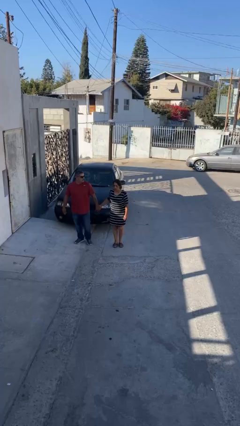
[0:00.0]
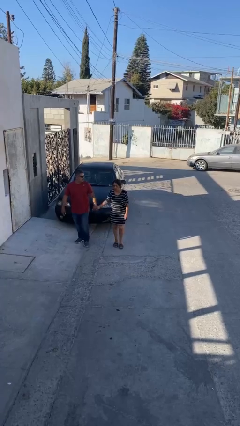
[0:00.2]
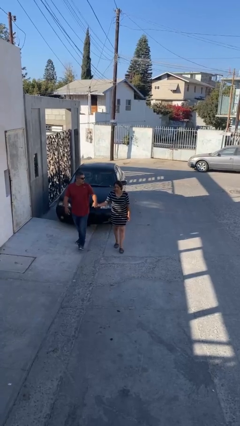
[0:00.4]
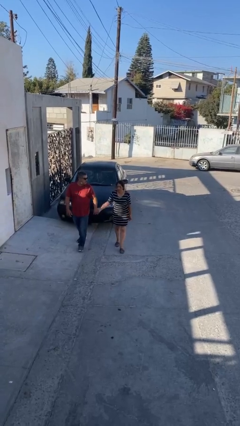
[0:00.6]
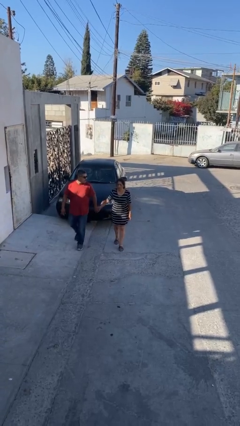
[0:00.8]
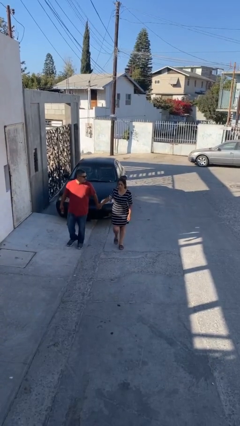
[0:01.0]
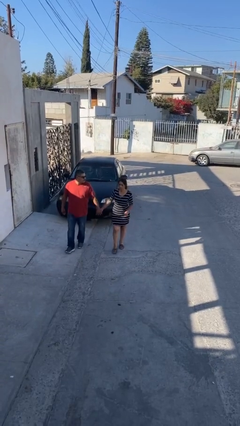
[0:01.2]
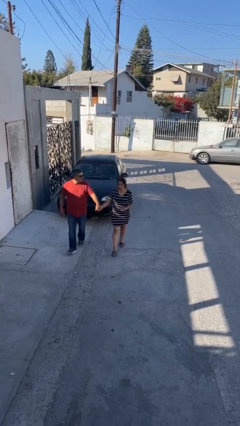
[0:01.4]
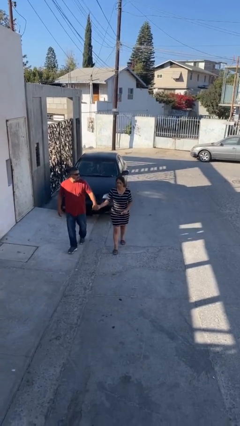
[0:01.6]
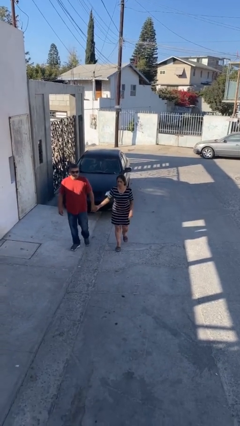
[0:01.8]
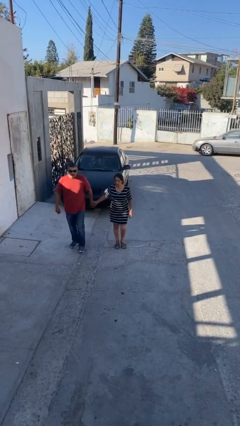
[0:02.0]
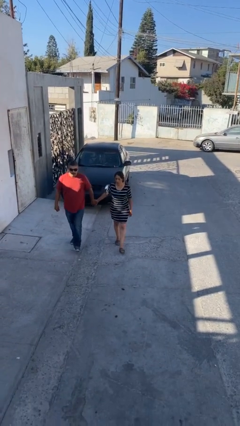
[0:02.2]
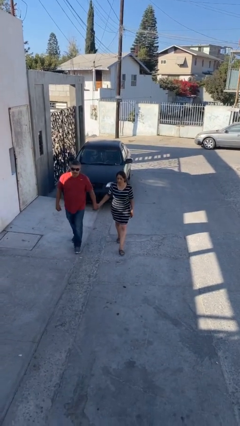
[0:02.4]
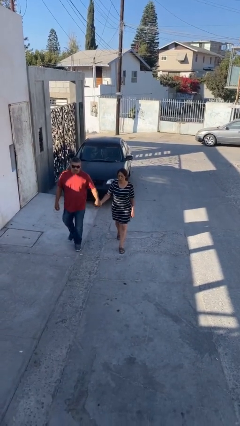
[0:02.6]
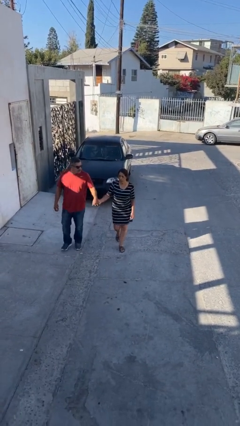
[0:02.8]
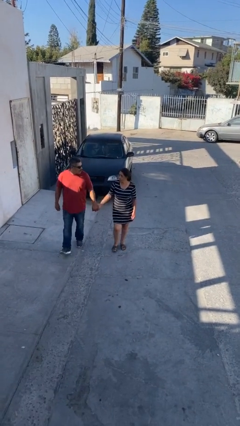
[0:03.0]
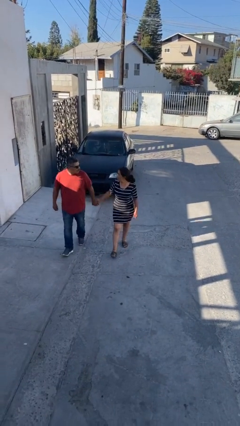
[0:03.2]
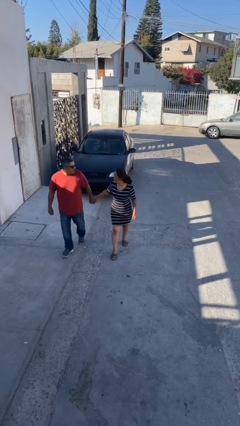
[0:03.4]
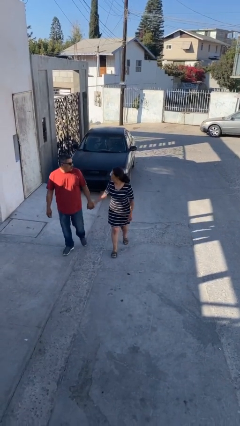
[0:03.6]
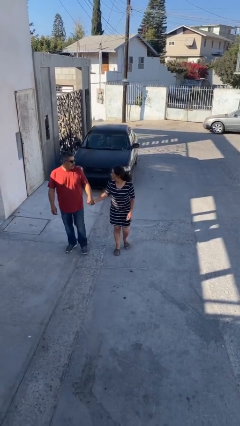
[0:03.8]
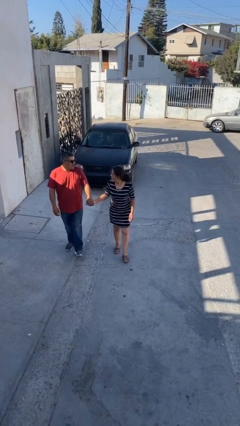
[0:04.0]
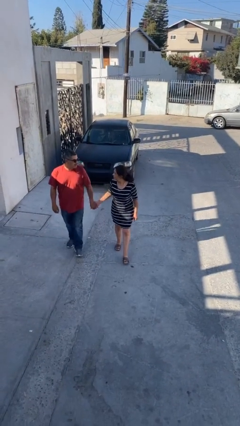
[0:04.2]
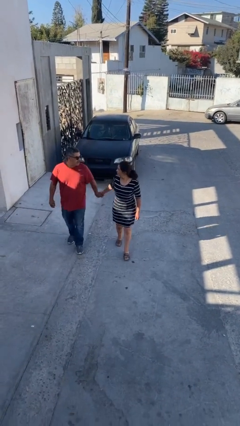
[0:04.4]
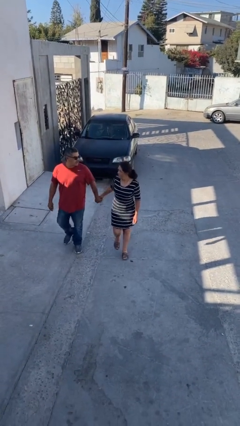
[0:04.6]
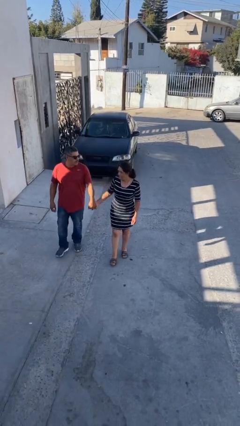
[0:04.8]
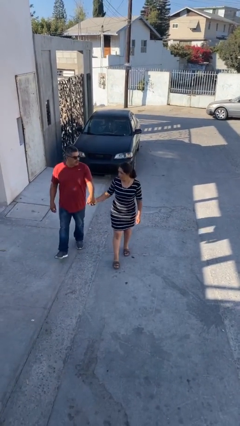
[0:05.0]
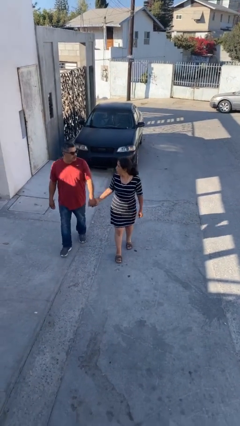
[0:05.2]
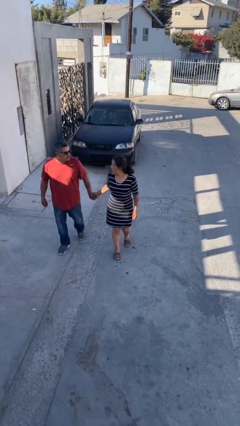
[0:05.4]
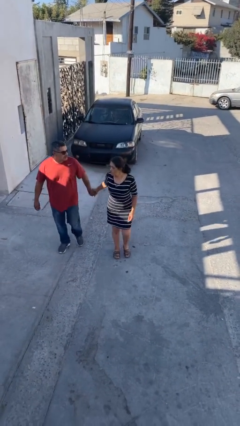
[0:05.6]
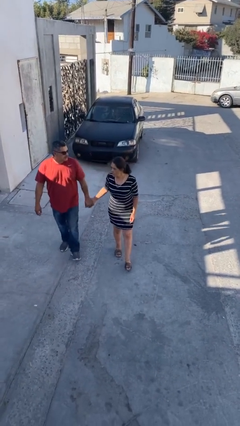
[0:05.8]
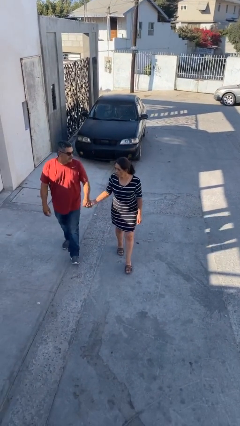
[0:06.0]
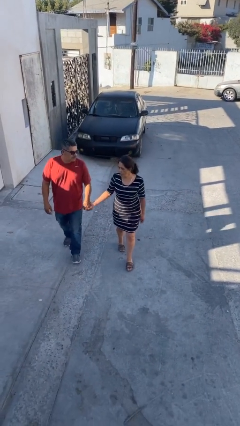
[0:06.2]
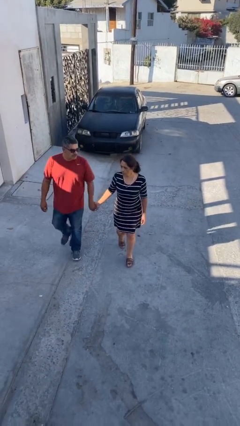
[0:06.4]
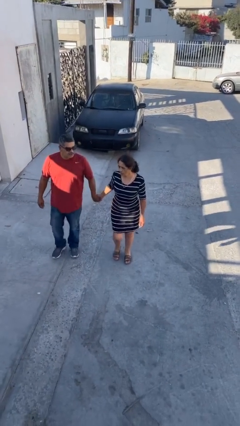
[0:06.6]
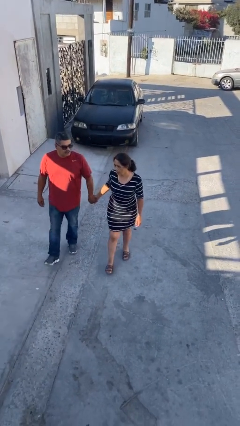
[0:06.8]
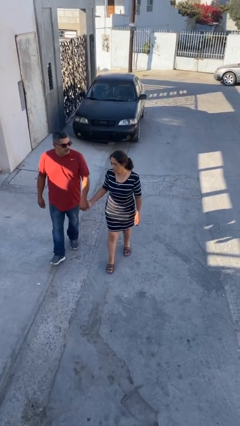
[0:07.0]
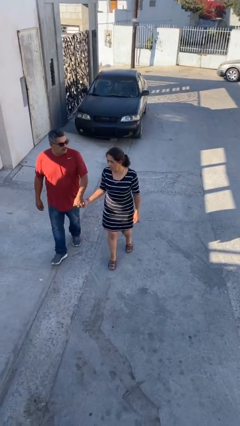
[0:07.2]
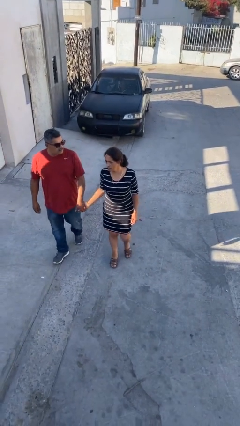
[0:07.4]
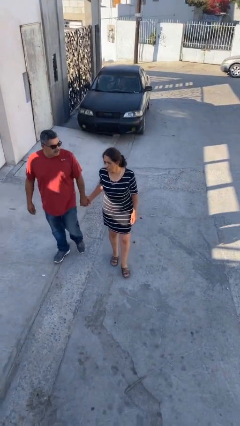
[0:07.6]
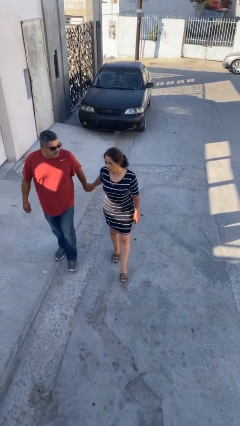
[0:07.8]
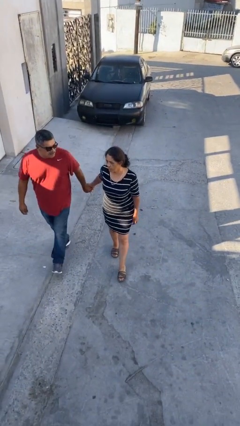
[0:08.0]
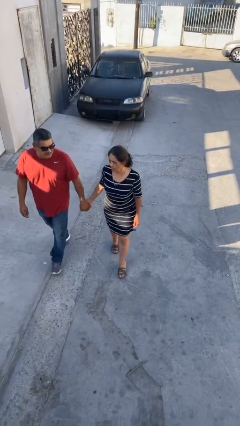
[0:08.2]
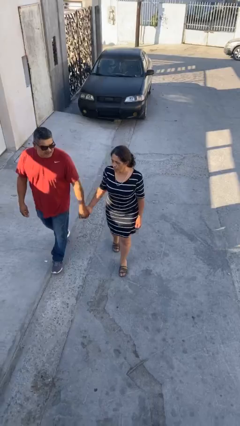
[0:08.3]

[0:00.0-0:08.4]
person holds hand

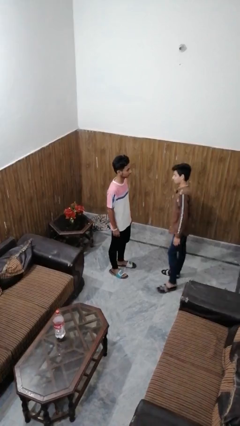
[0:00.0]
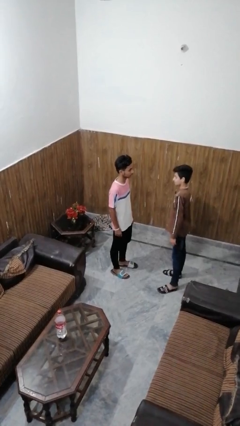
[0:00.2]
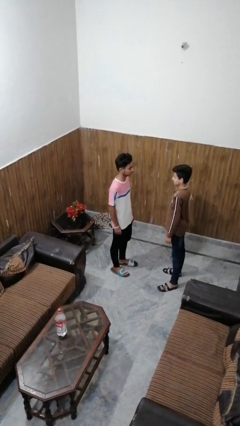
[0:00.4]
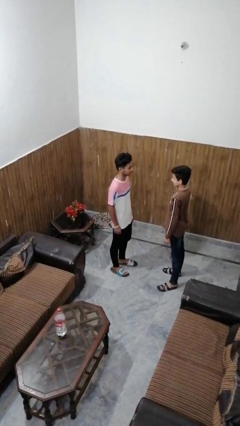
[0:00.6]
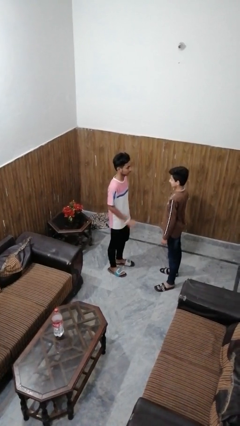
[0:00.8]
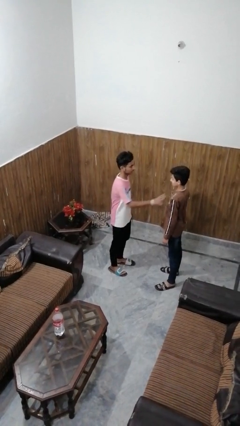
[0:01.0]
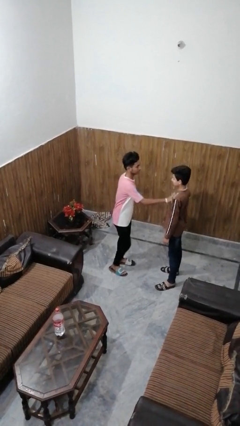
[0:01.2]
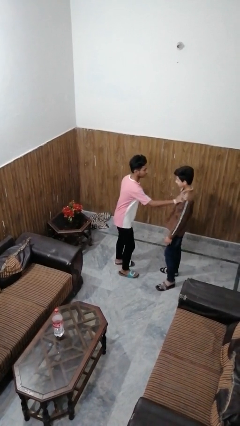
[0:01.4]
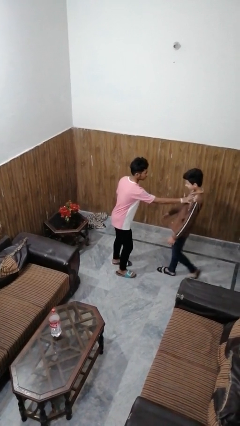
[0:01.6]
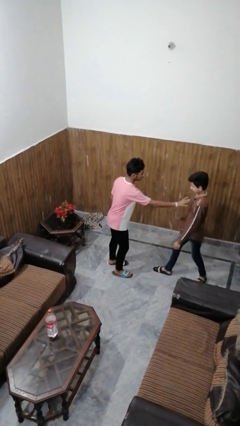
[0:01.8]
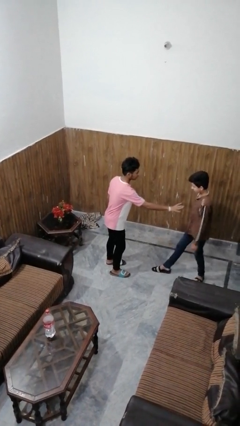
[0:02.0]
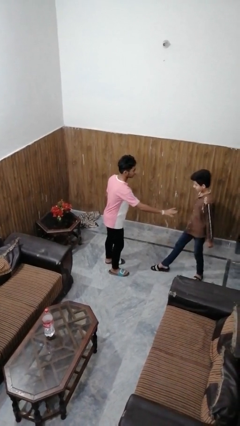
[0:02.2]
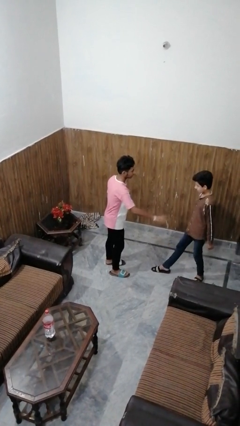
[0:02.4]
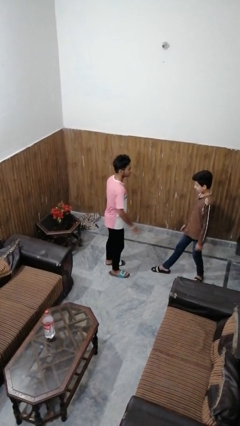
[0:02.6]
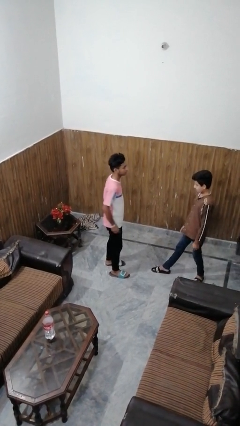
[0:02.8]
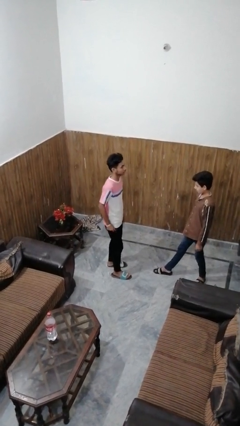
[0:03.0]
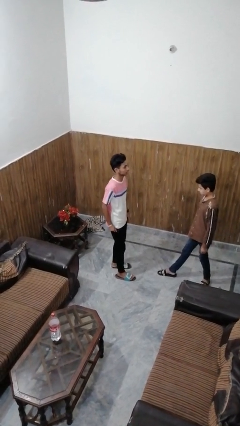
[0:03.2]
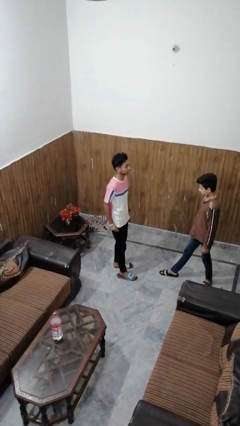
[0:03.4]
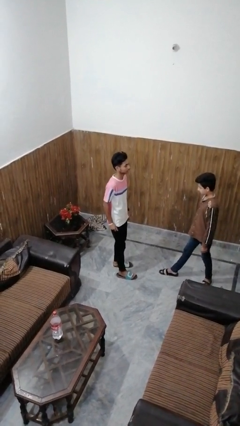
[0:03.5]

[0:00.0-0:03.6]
person shoves person

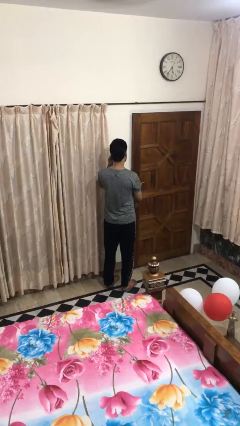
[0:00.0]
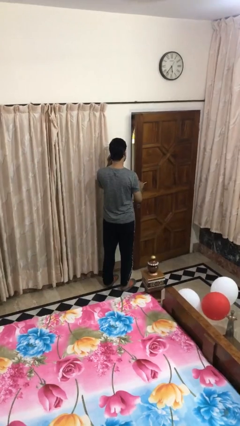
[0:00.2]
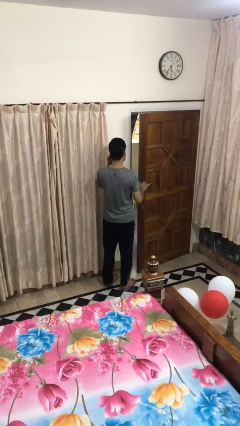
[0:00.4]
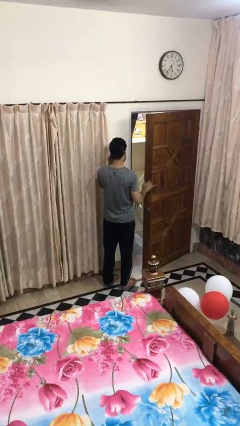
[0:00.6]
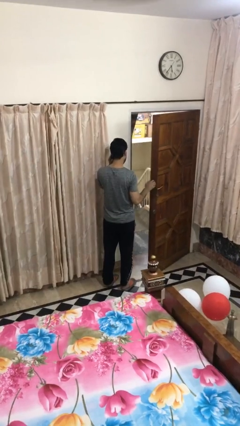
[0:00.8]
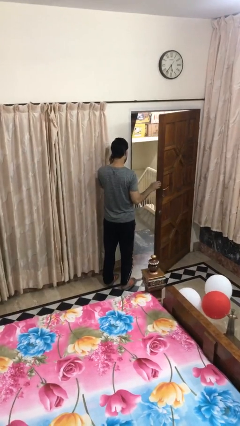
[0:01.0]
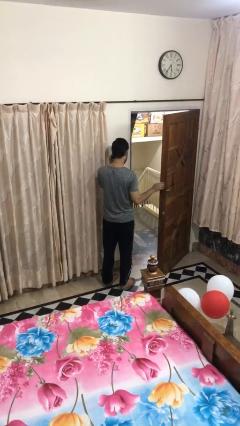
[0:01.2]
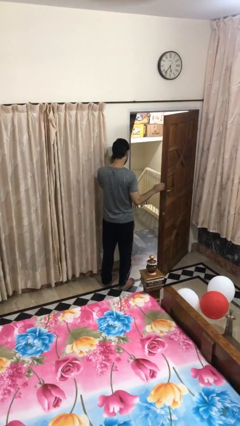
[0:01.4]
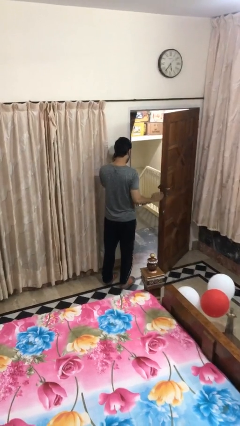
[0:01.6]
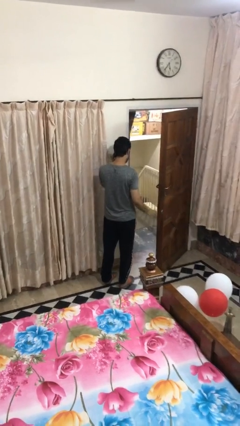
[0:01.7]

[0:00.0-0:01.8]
person opens facility door

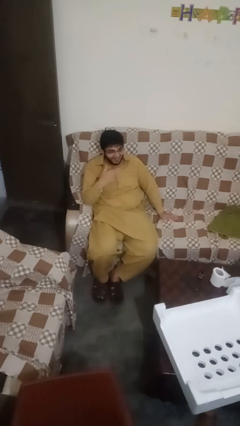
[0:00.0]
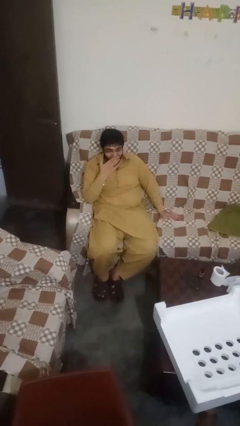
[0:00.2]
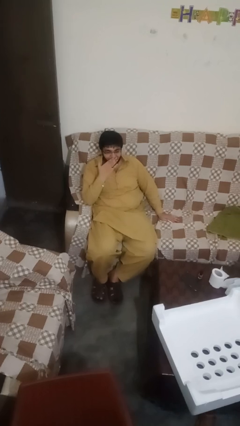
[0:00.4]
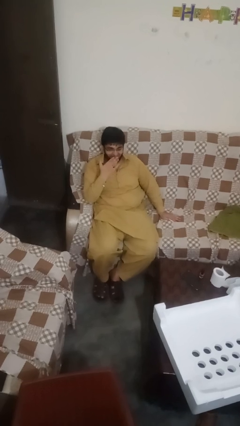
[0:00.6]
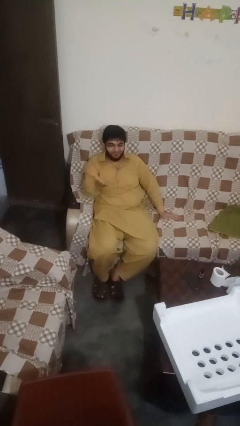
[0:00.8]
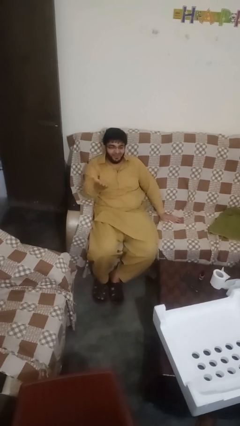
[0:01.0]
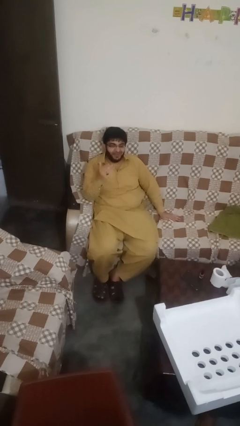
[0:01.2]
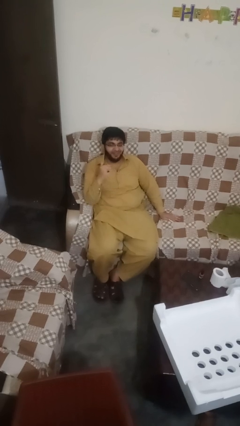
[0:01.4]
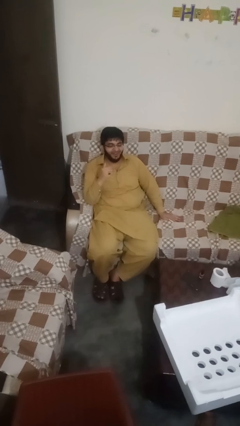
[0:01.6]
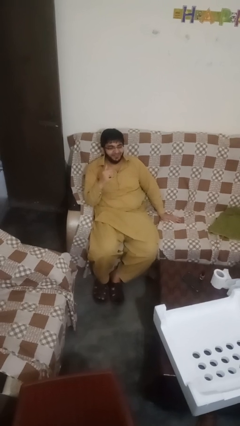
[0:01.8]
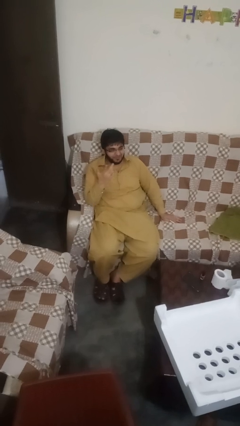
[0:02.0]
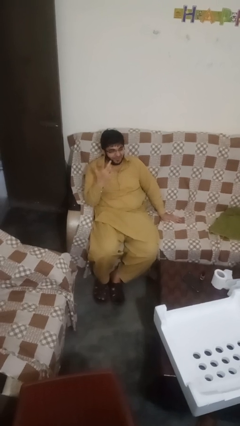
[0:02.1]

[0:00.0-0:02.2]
person gestures blow kiss

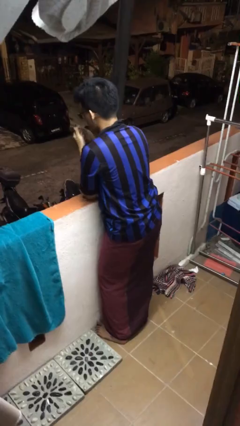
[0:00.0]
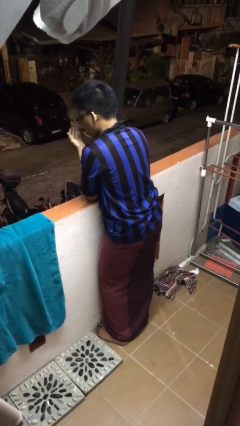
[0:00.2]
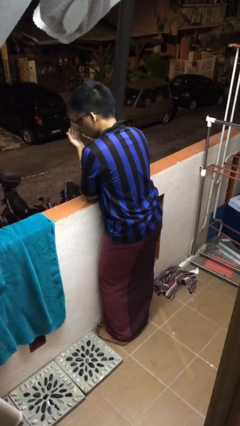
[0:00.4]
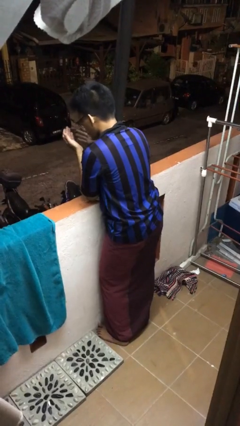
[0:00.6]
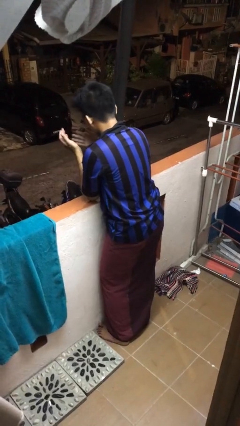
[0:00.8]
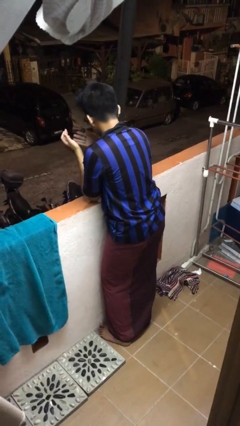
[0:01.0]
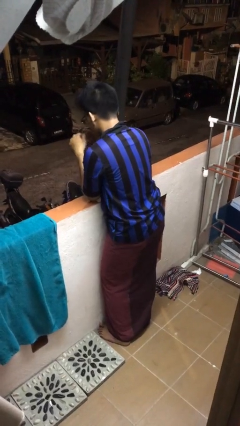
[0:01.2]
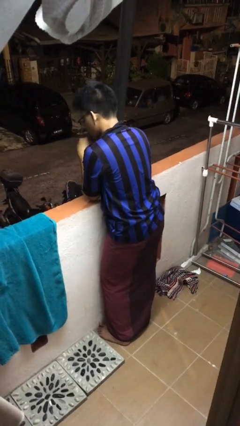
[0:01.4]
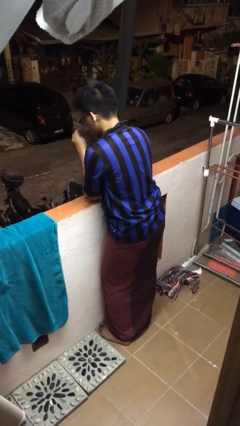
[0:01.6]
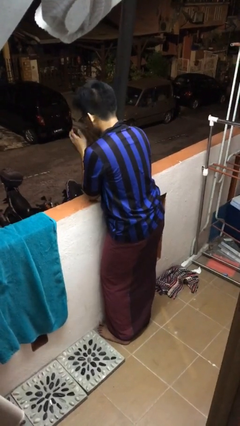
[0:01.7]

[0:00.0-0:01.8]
person blows into hands

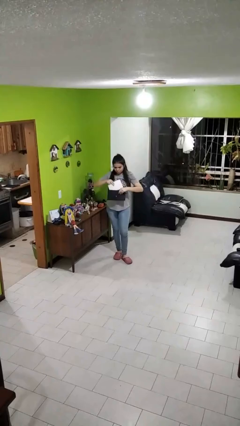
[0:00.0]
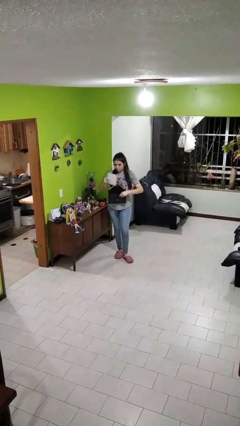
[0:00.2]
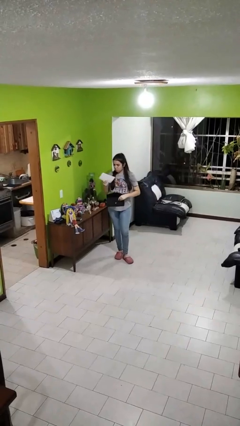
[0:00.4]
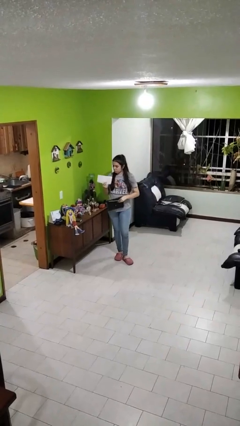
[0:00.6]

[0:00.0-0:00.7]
person takes object from purse
